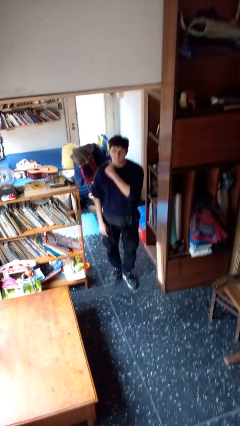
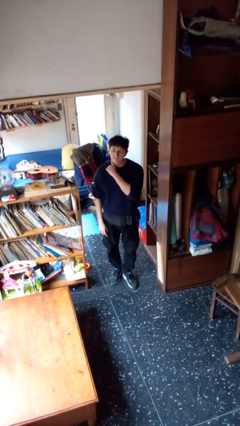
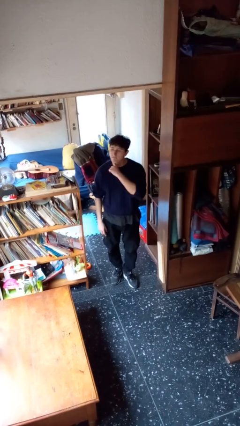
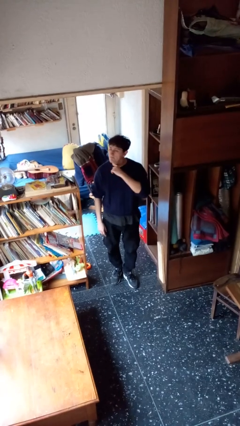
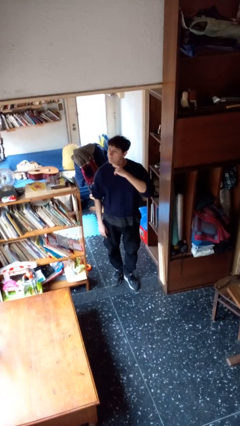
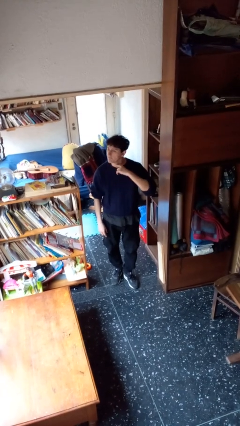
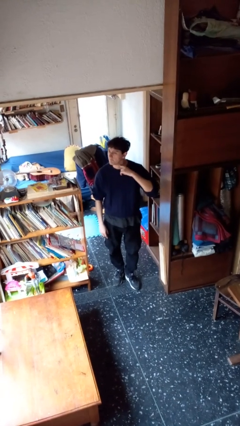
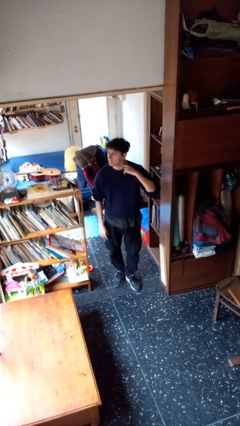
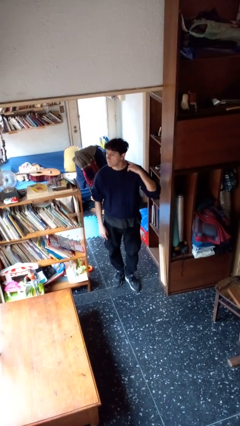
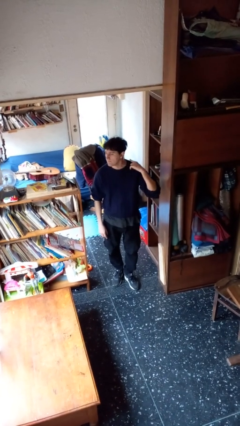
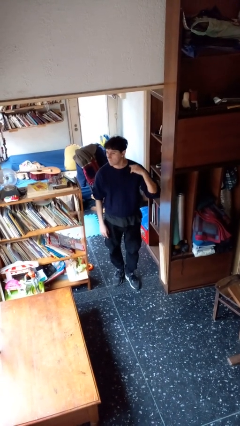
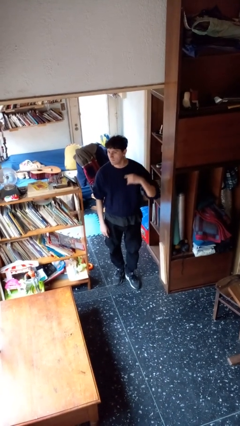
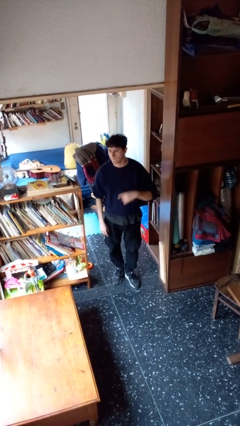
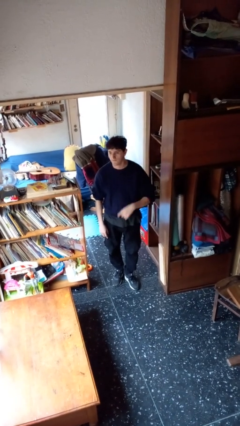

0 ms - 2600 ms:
person gestures cut

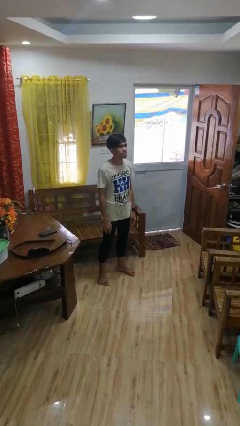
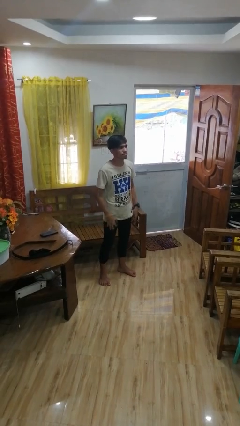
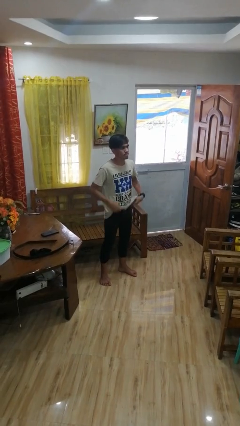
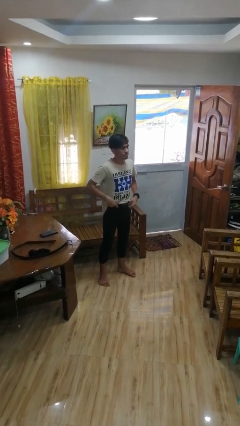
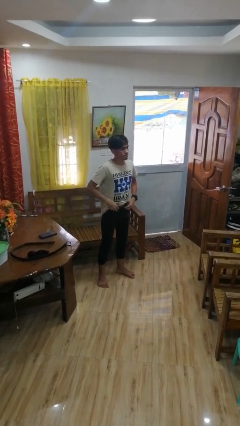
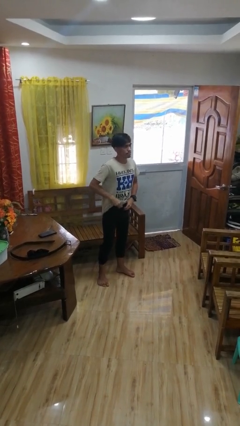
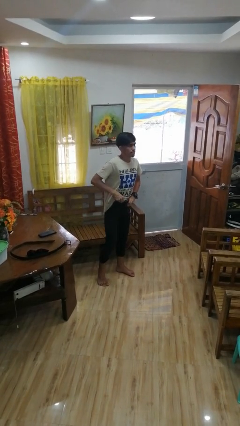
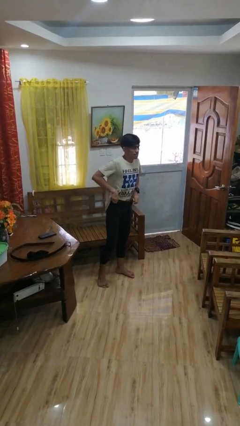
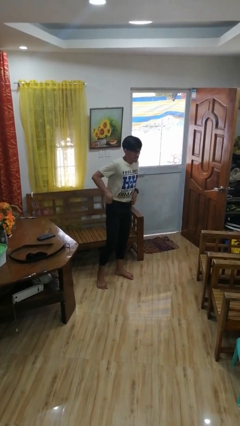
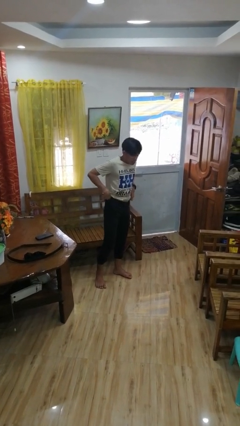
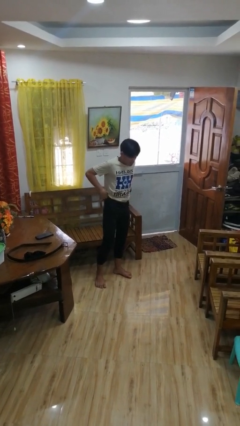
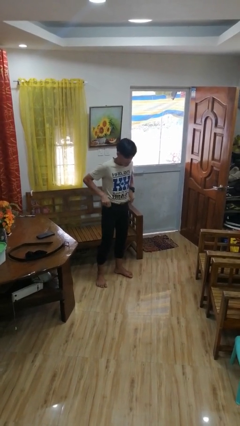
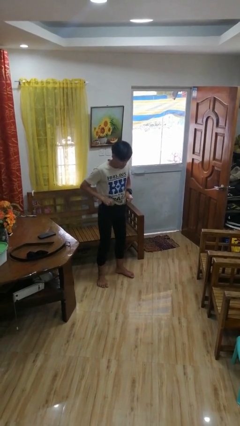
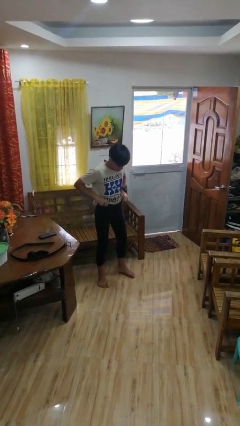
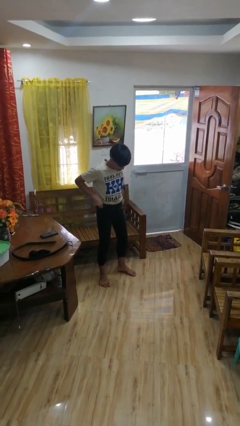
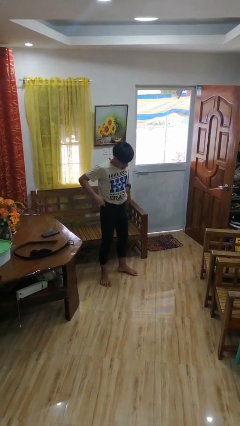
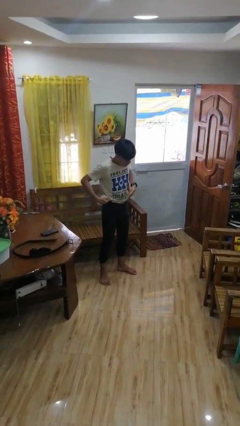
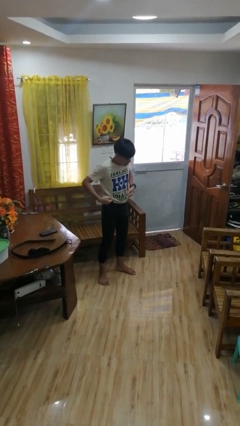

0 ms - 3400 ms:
person hikes up pants

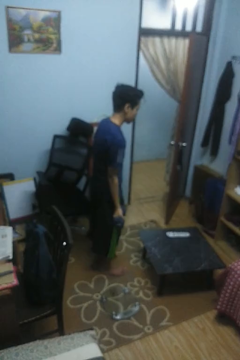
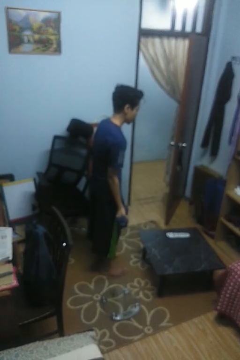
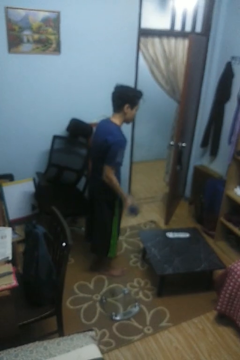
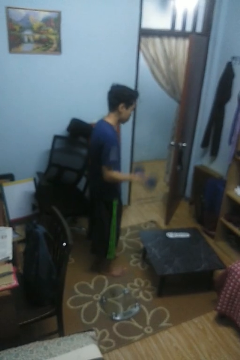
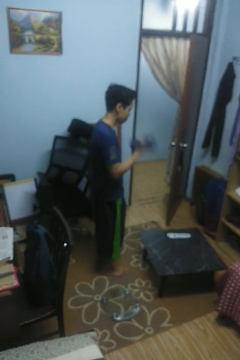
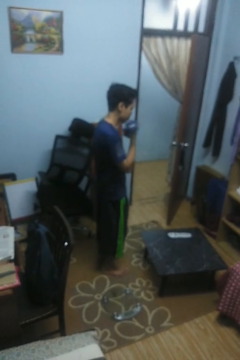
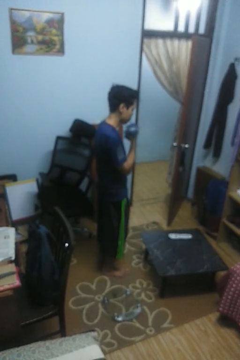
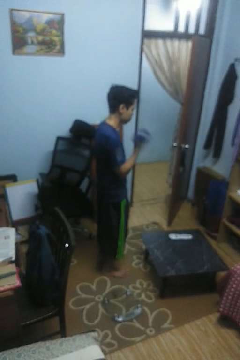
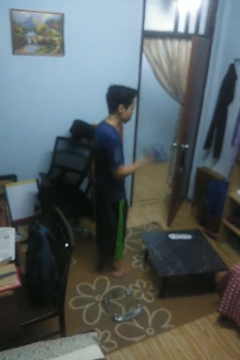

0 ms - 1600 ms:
person lifts dumbbells

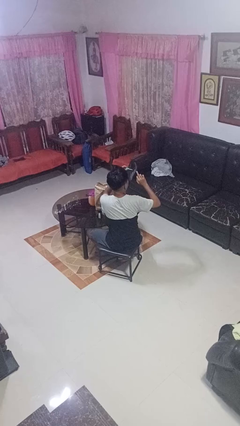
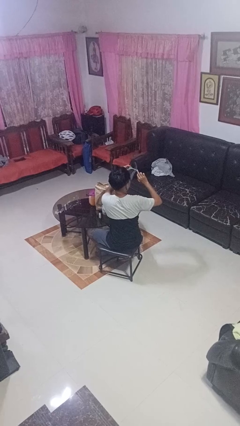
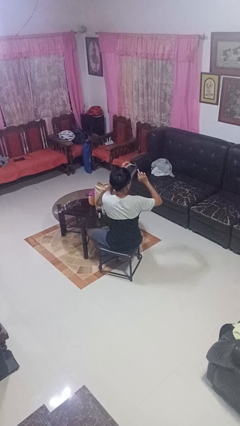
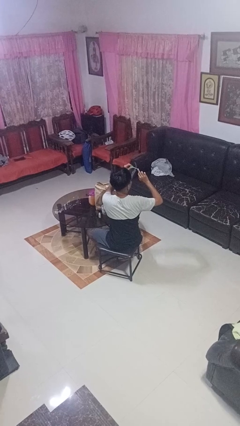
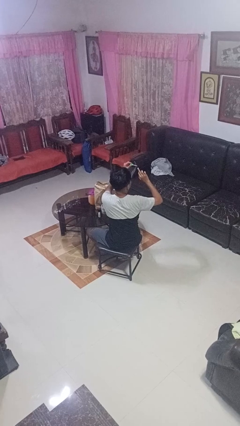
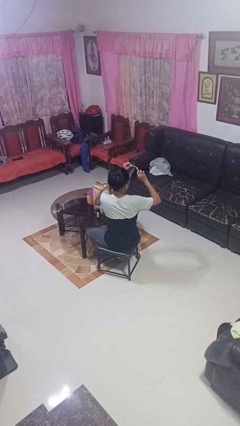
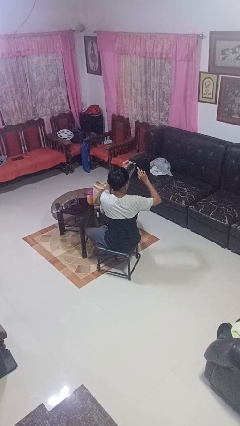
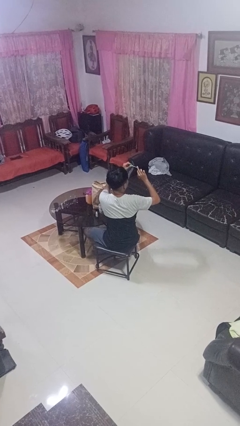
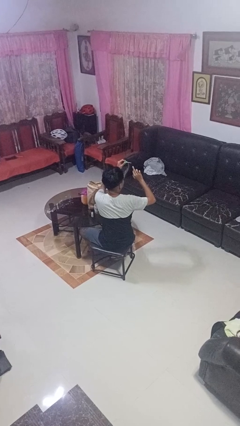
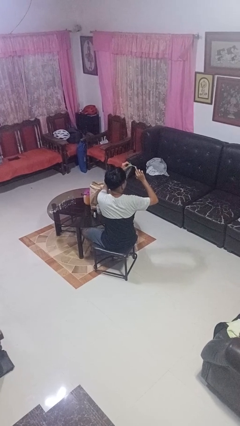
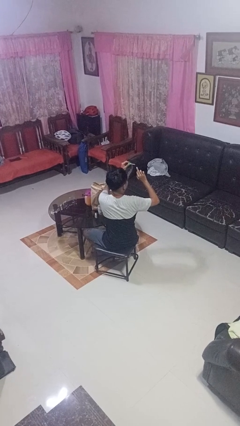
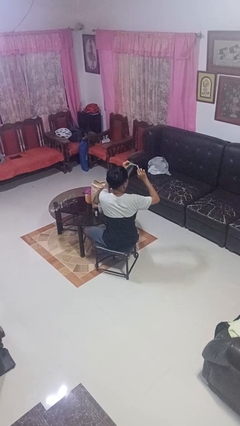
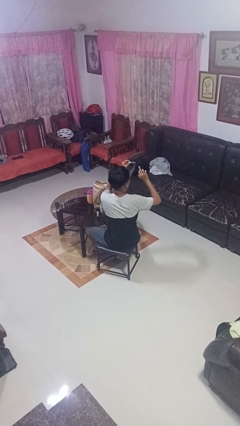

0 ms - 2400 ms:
person paints fingernails

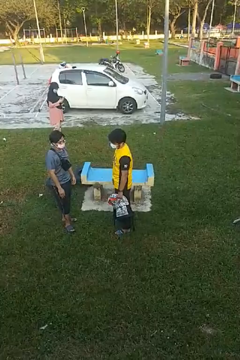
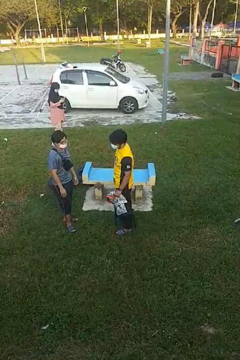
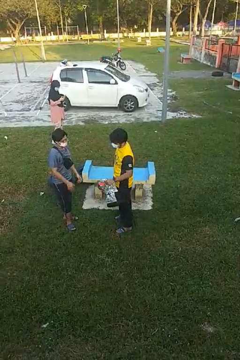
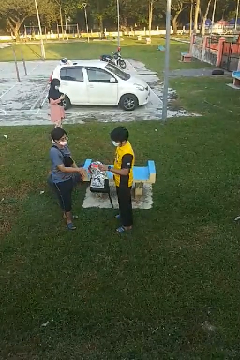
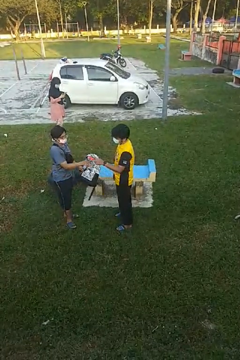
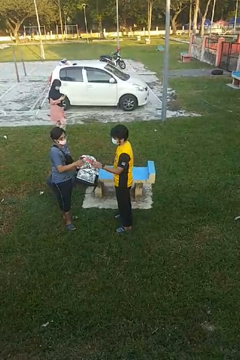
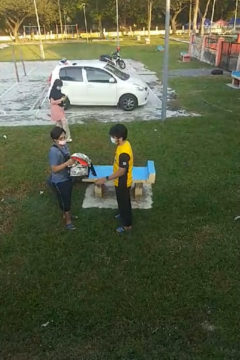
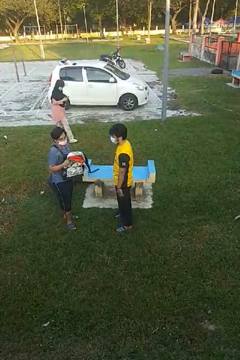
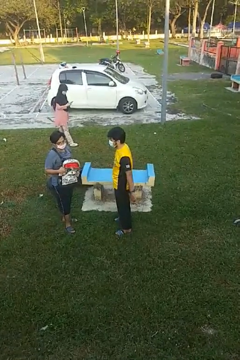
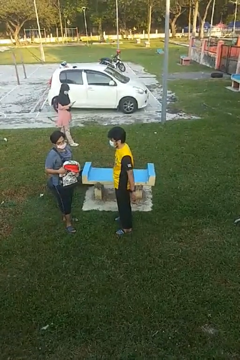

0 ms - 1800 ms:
person transfers object to person

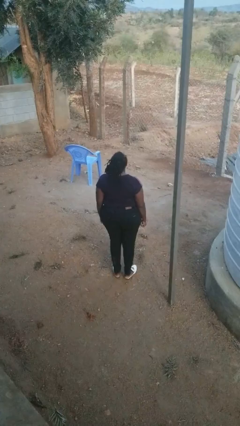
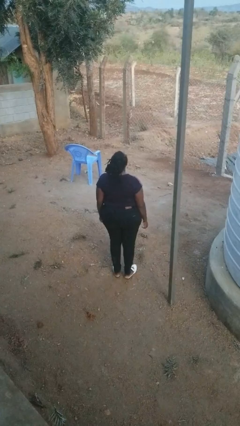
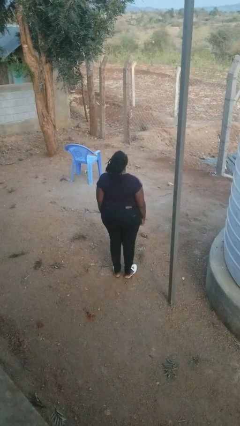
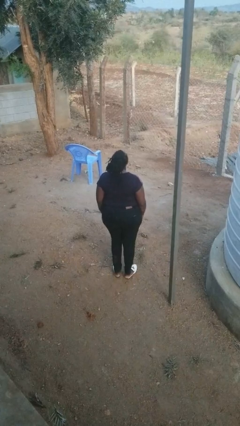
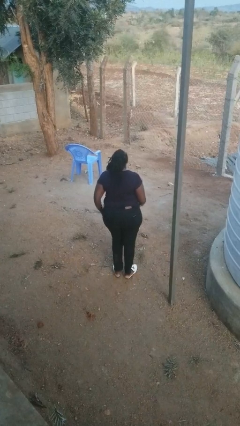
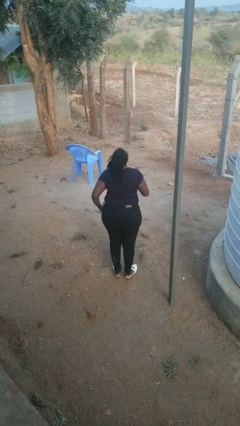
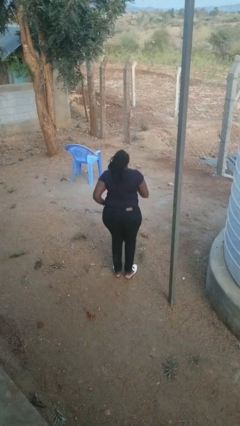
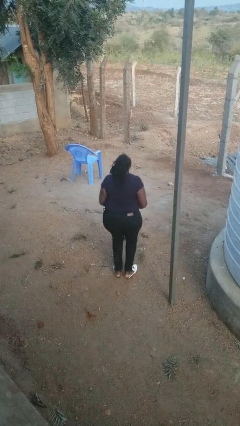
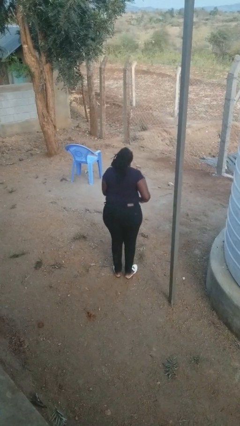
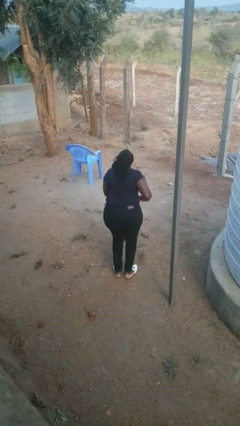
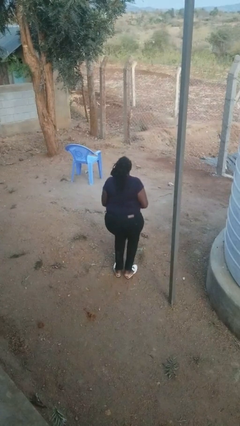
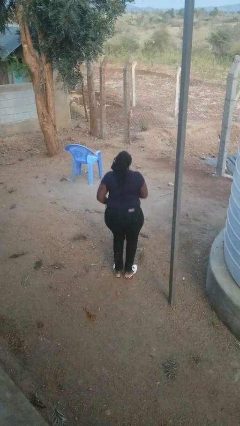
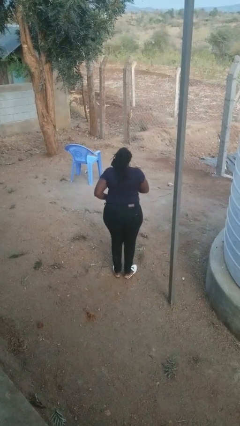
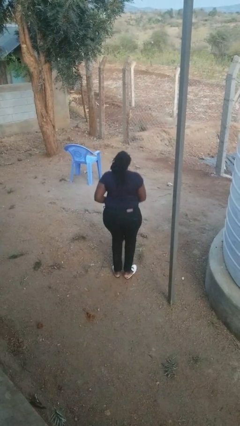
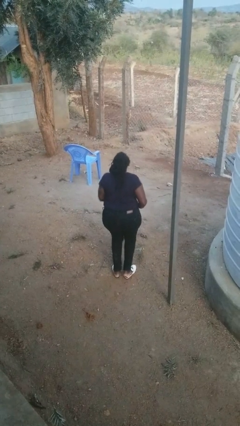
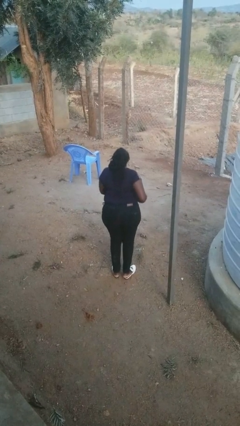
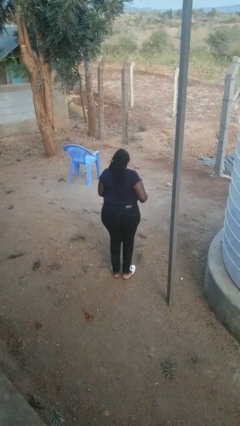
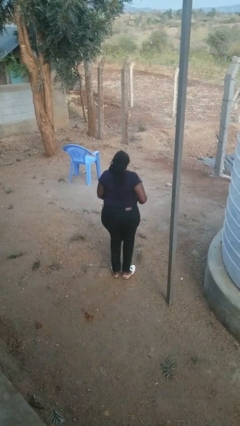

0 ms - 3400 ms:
person dances in place

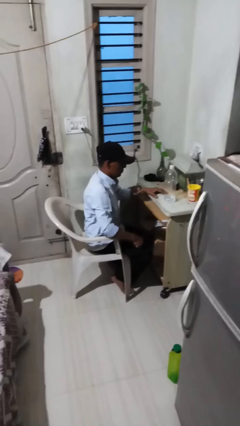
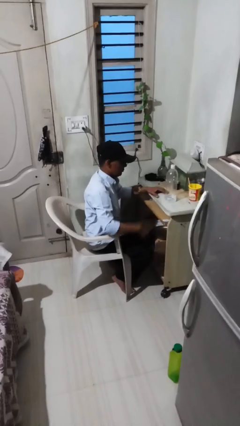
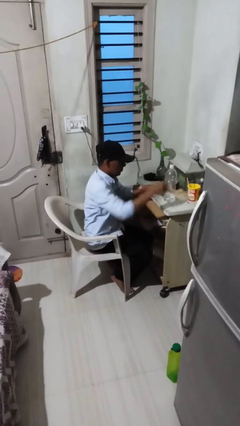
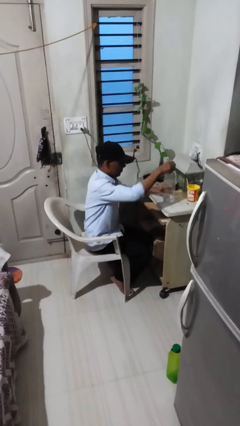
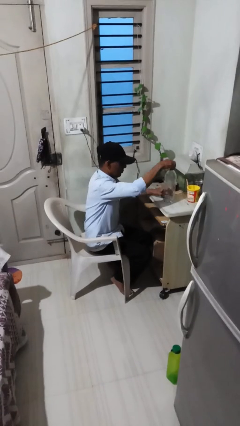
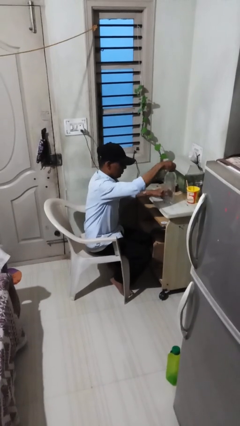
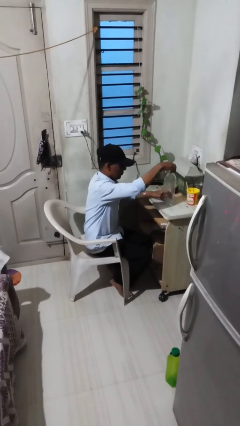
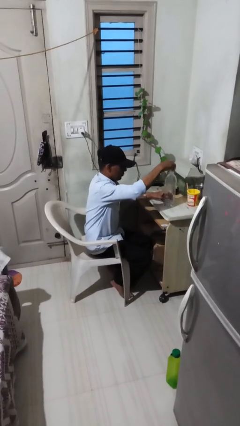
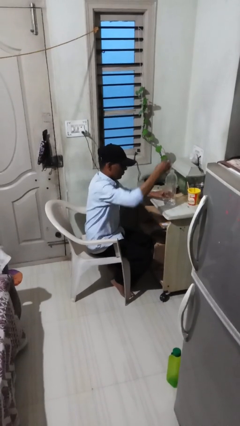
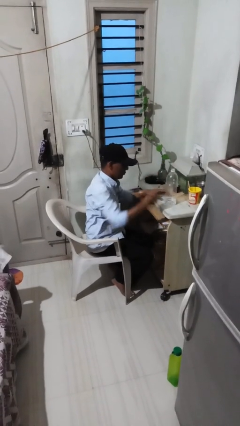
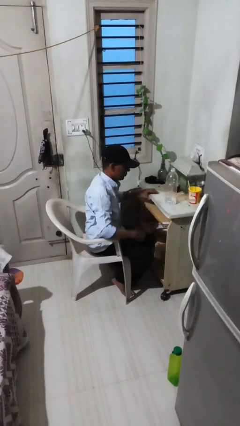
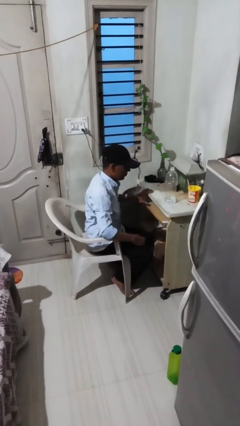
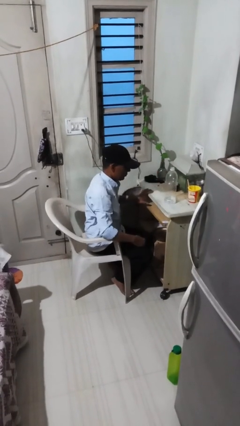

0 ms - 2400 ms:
person unscrews lid from bottle

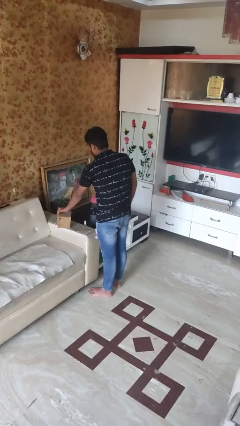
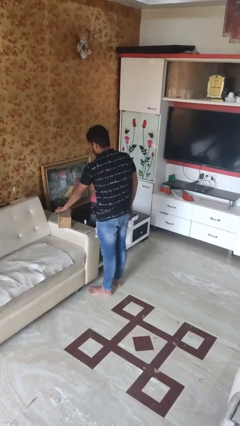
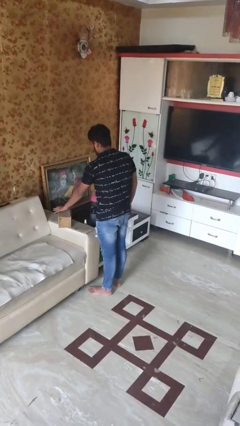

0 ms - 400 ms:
person puts down object on couch
